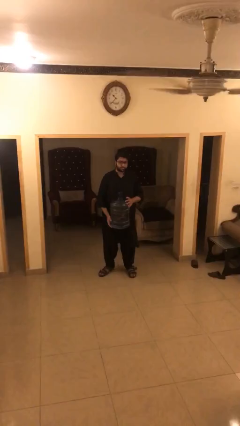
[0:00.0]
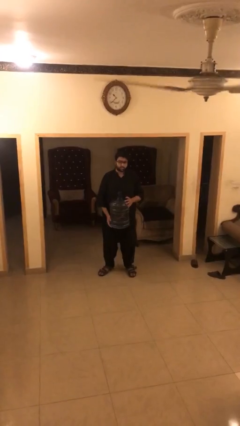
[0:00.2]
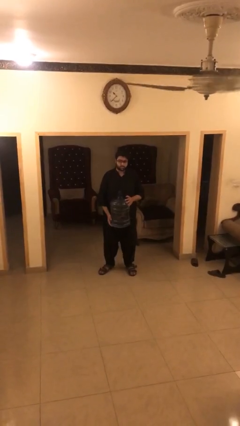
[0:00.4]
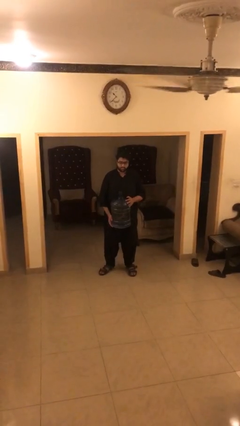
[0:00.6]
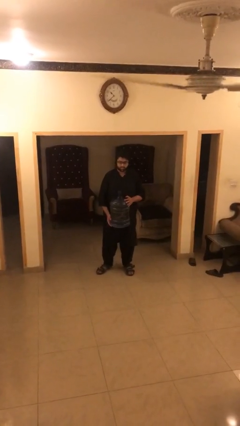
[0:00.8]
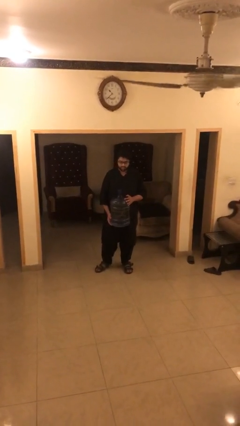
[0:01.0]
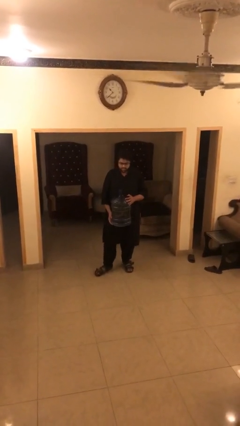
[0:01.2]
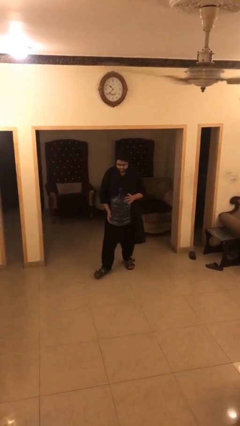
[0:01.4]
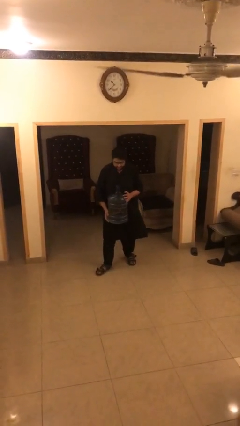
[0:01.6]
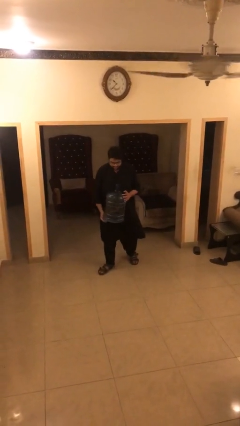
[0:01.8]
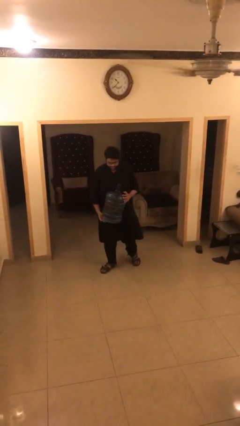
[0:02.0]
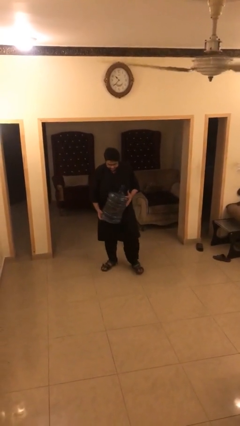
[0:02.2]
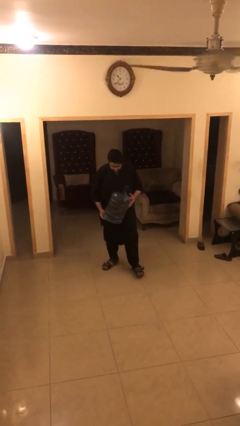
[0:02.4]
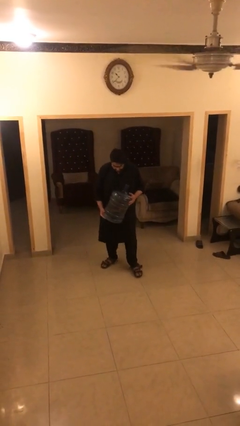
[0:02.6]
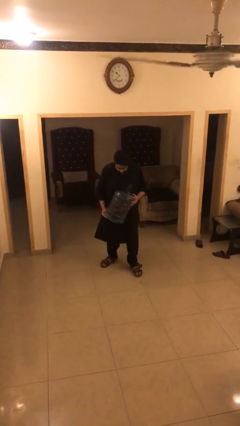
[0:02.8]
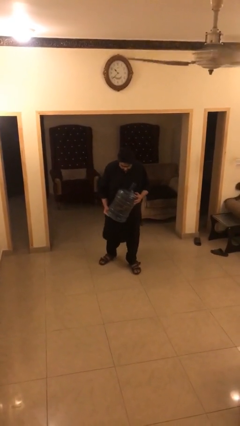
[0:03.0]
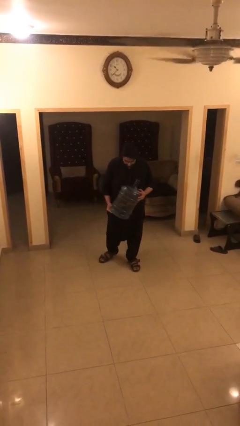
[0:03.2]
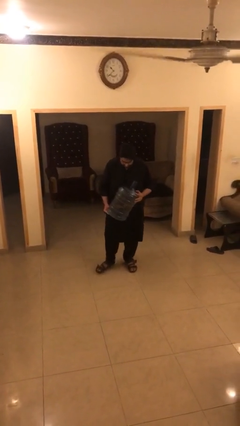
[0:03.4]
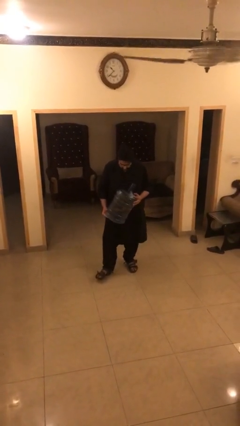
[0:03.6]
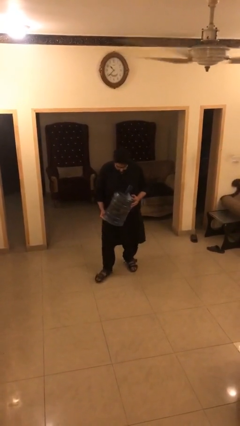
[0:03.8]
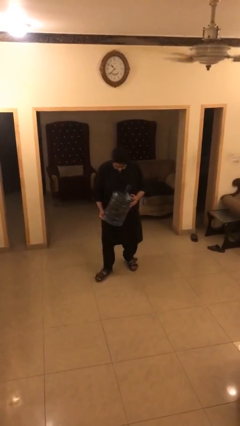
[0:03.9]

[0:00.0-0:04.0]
person carries heavy object

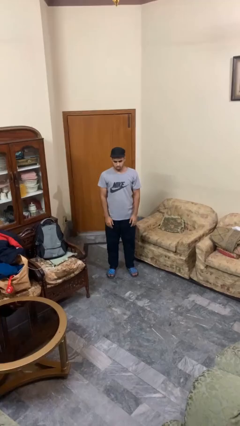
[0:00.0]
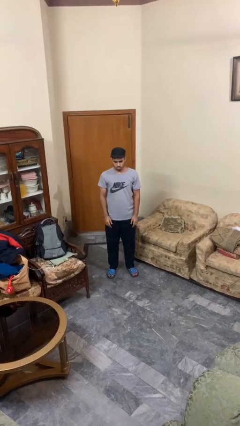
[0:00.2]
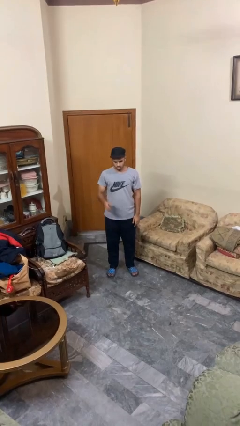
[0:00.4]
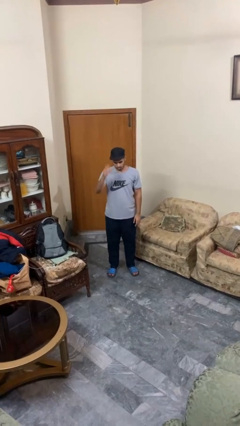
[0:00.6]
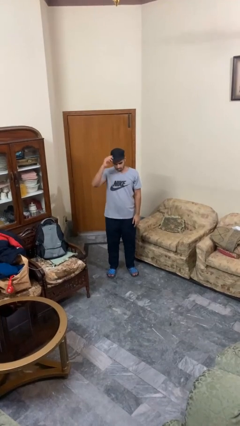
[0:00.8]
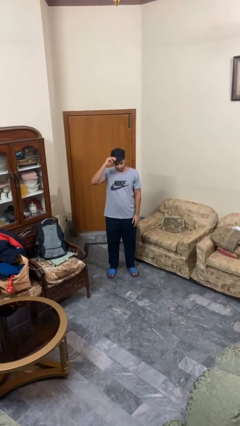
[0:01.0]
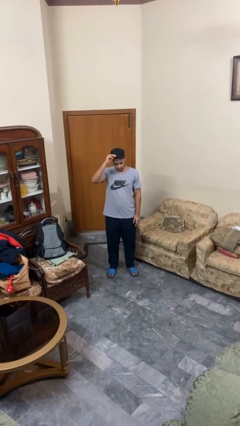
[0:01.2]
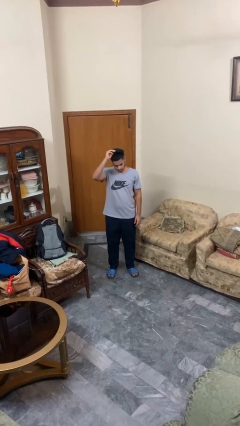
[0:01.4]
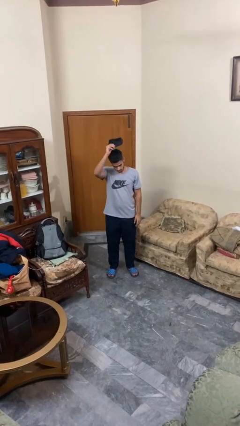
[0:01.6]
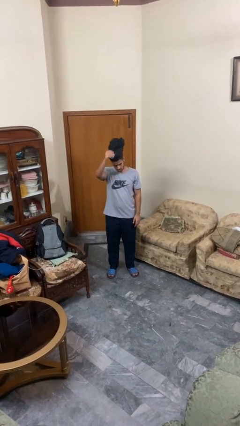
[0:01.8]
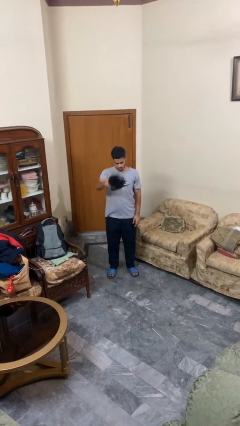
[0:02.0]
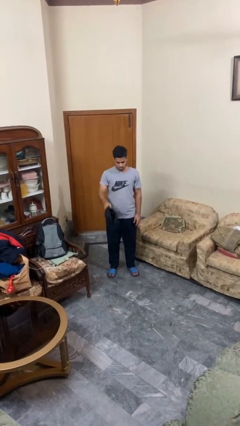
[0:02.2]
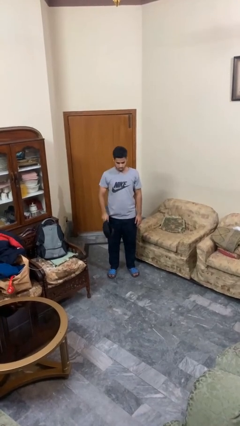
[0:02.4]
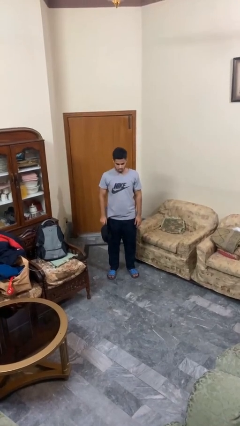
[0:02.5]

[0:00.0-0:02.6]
person takes off hat

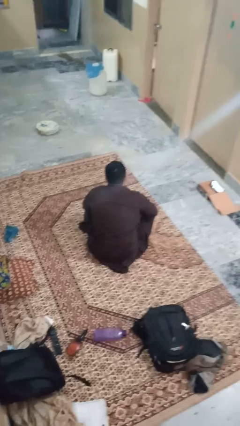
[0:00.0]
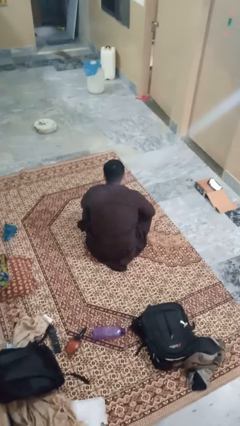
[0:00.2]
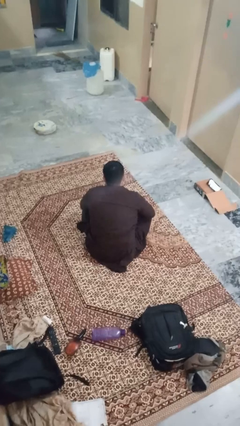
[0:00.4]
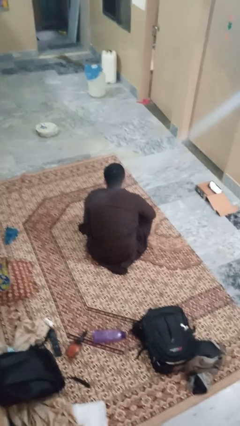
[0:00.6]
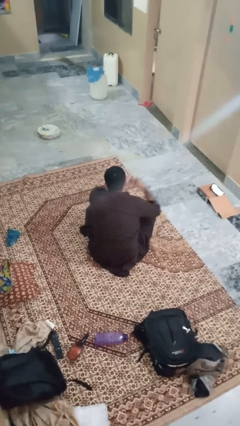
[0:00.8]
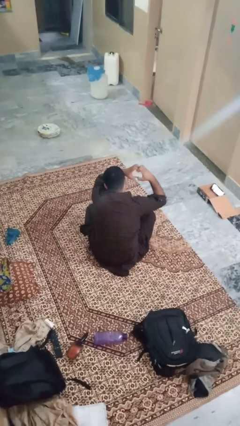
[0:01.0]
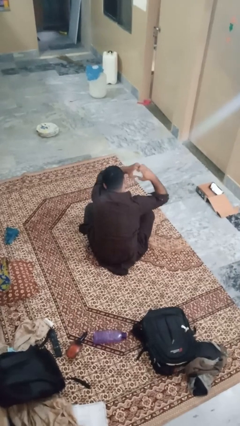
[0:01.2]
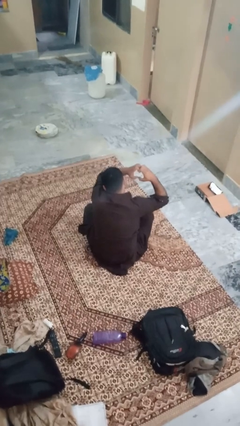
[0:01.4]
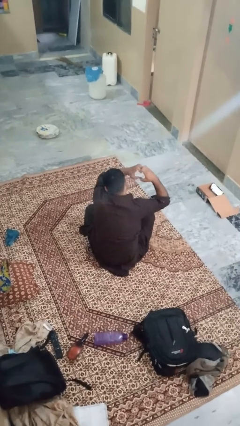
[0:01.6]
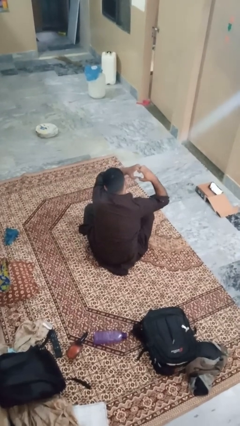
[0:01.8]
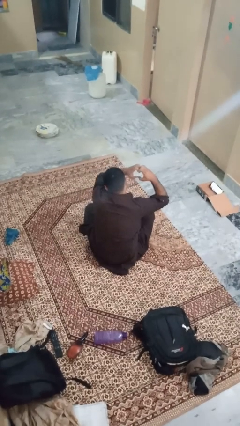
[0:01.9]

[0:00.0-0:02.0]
person gestures heart

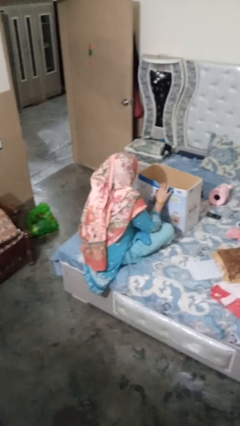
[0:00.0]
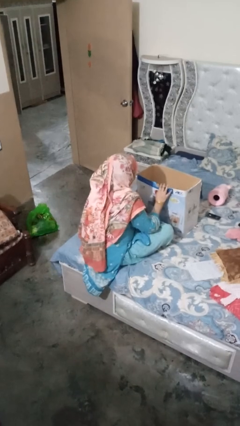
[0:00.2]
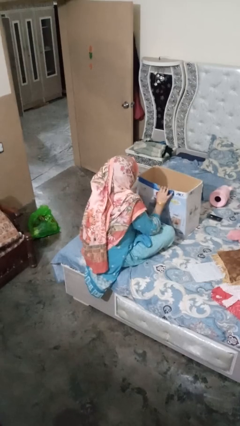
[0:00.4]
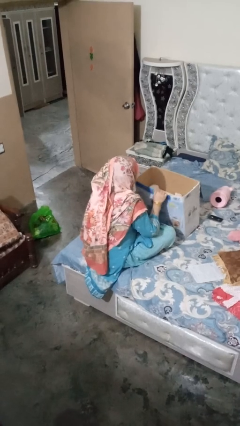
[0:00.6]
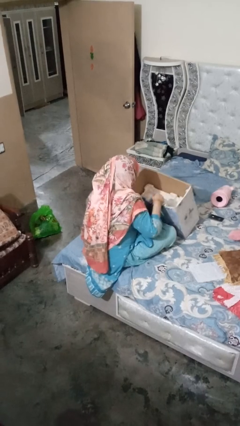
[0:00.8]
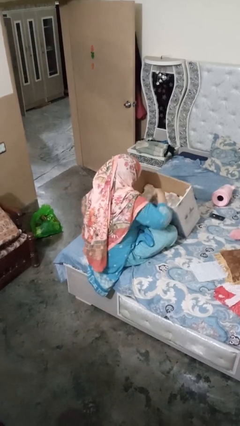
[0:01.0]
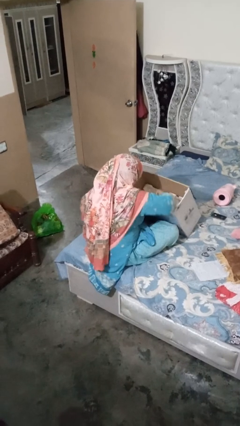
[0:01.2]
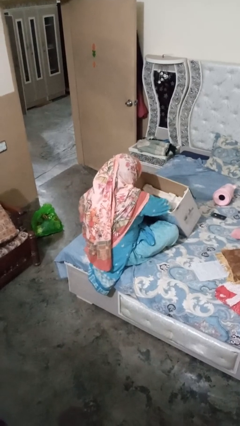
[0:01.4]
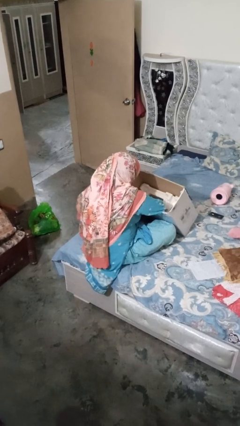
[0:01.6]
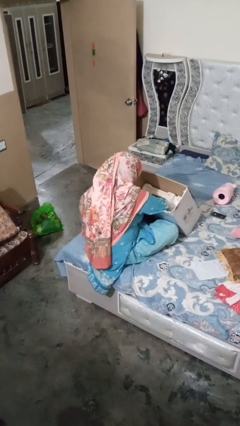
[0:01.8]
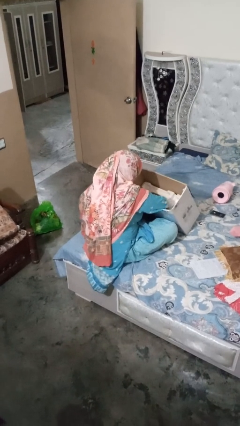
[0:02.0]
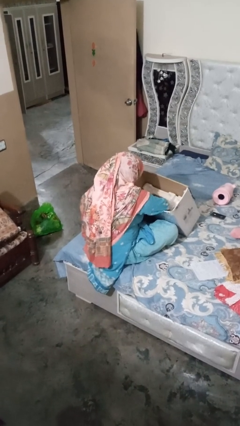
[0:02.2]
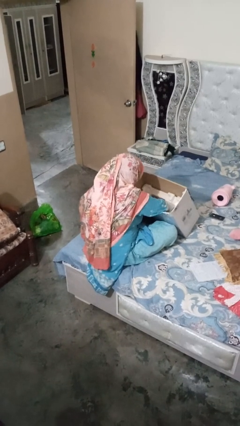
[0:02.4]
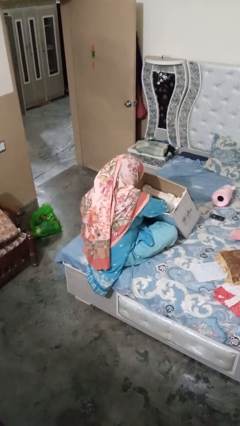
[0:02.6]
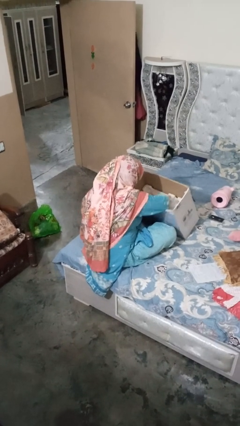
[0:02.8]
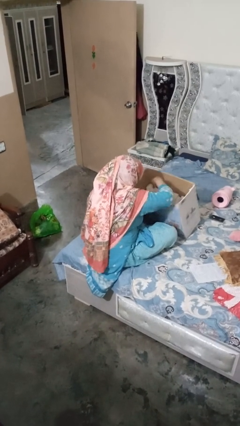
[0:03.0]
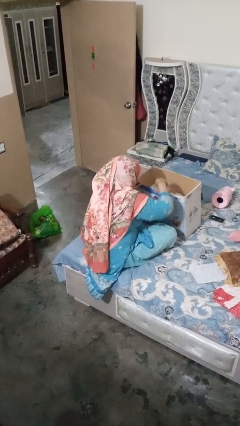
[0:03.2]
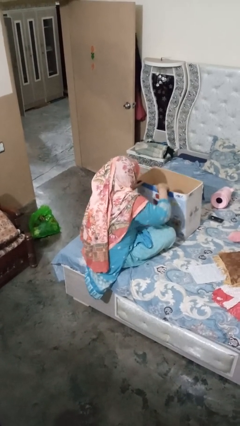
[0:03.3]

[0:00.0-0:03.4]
person searches in box

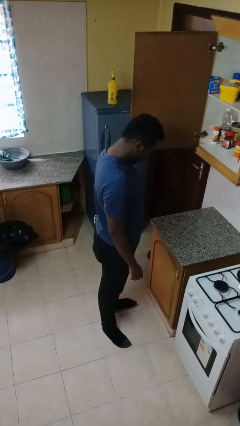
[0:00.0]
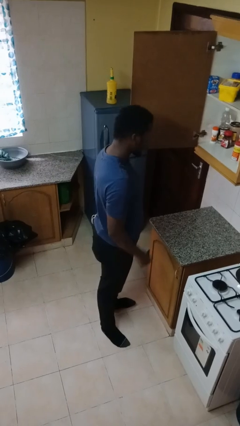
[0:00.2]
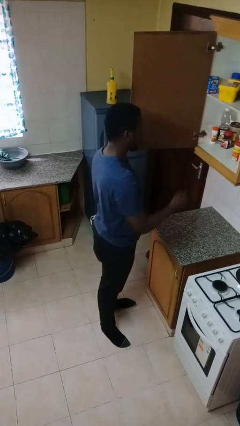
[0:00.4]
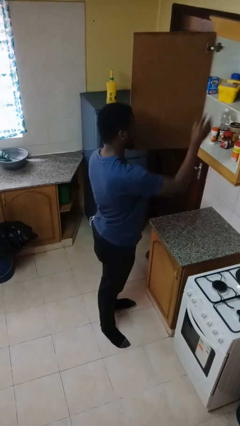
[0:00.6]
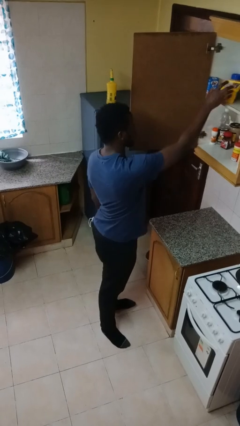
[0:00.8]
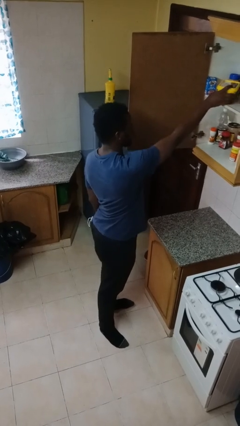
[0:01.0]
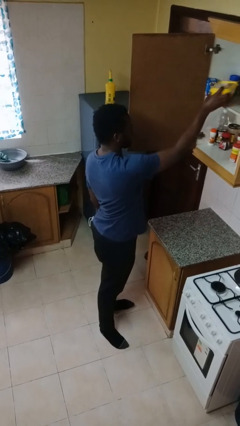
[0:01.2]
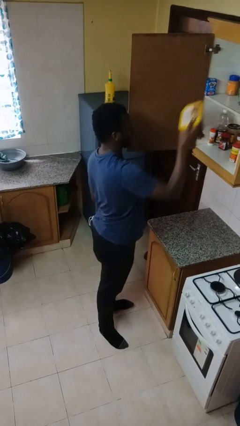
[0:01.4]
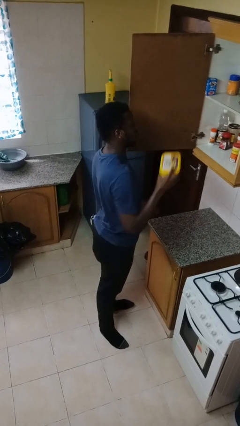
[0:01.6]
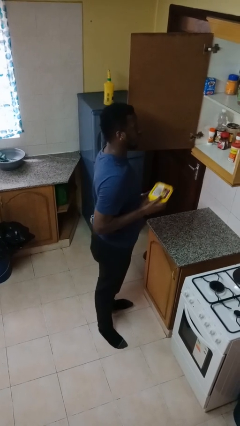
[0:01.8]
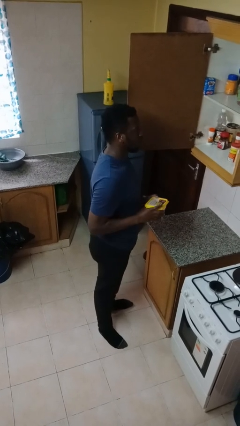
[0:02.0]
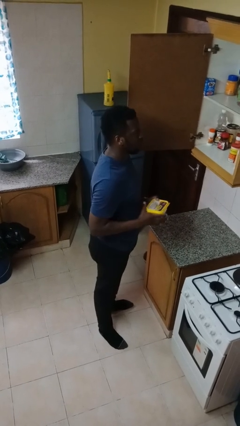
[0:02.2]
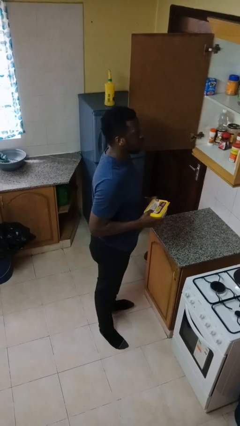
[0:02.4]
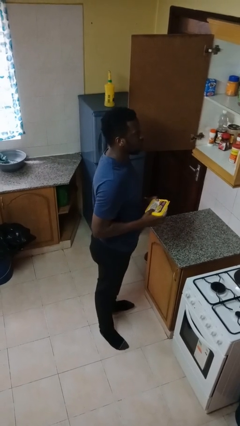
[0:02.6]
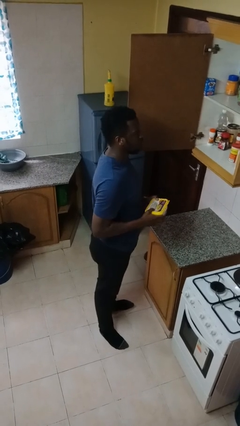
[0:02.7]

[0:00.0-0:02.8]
person picks up object from shelf

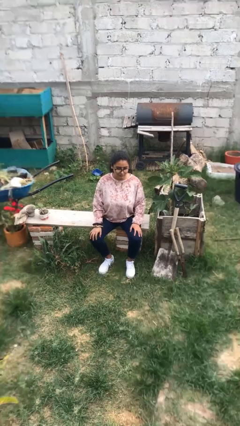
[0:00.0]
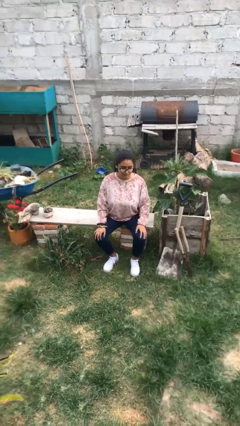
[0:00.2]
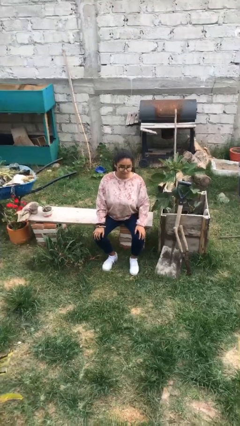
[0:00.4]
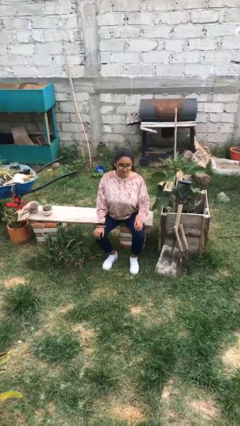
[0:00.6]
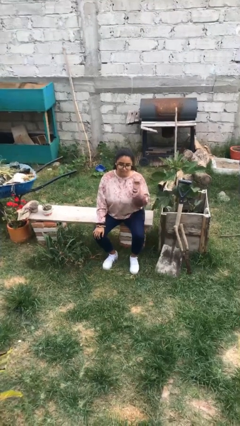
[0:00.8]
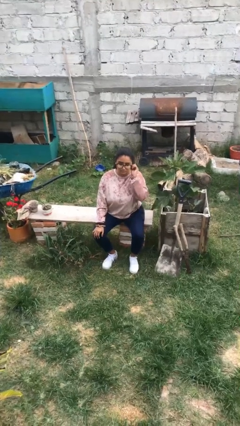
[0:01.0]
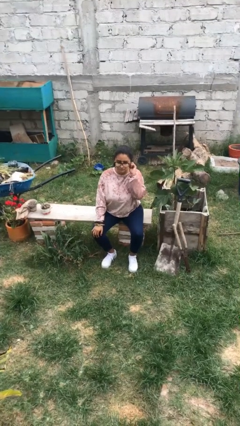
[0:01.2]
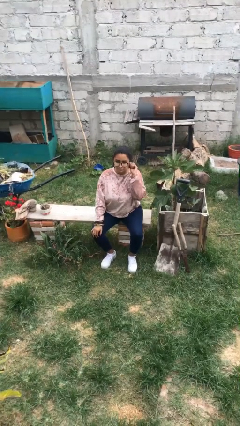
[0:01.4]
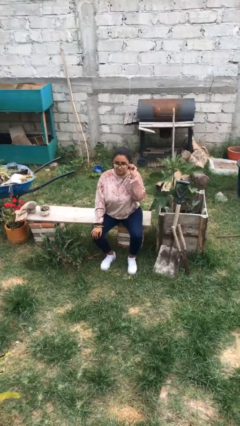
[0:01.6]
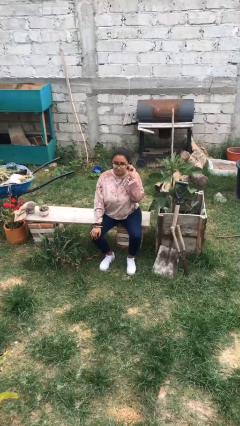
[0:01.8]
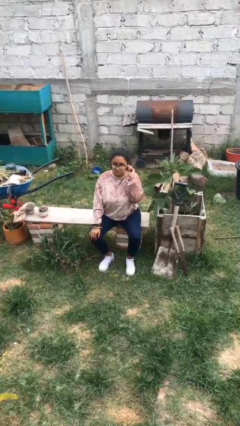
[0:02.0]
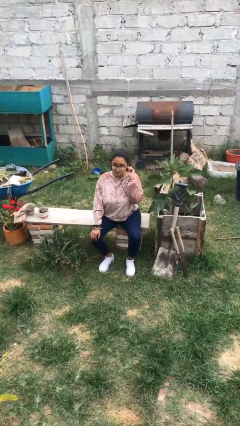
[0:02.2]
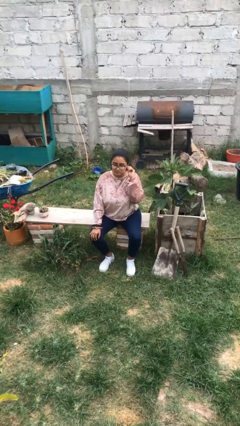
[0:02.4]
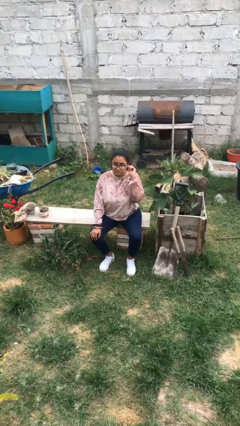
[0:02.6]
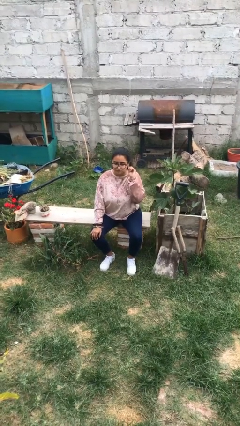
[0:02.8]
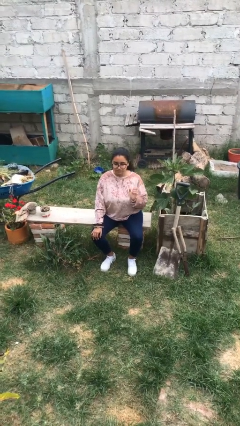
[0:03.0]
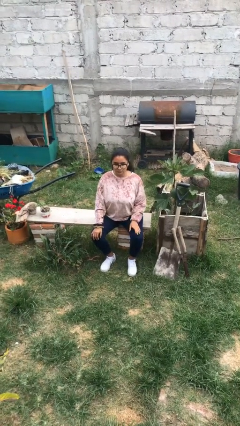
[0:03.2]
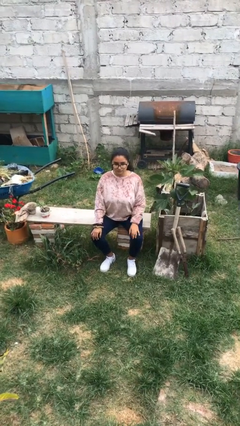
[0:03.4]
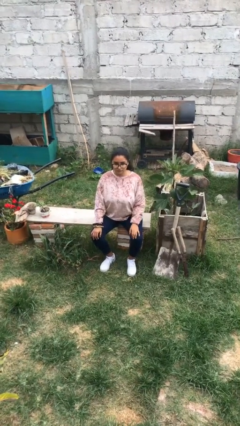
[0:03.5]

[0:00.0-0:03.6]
person touches earlobe
